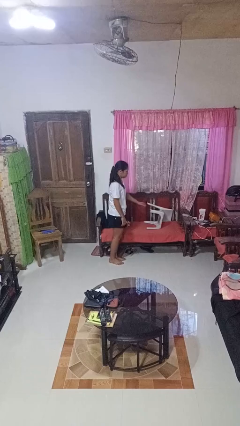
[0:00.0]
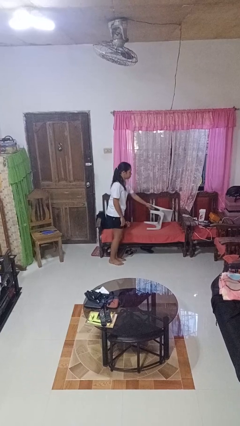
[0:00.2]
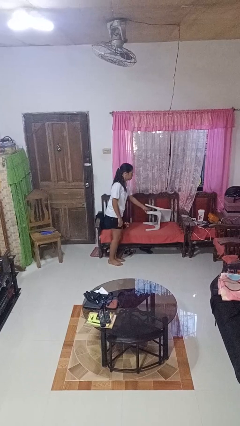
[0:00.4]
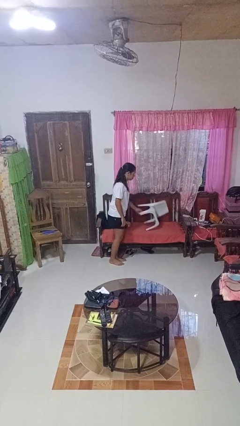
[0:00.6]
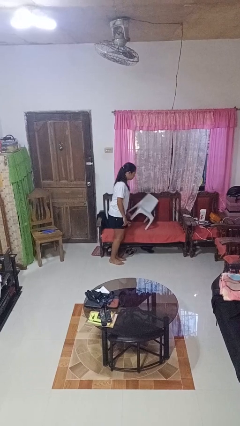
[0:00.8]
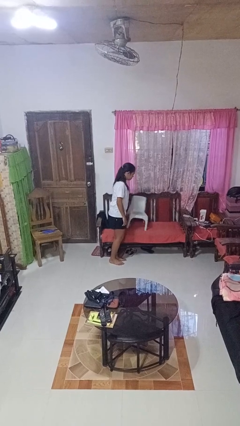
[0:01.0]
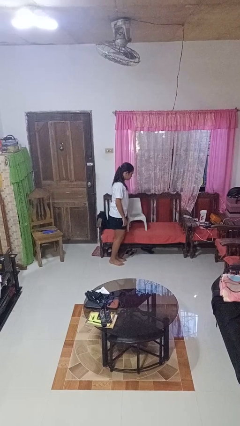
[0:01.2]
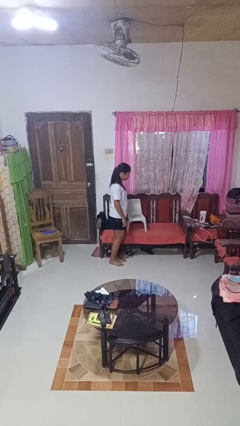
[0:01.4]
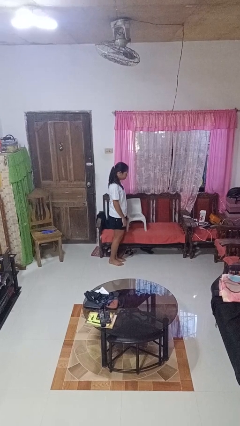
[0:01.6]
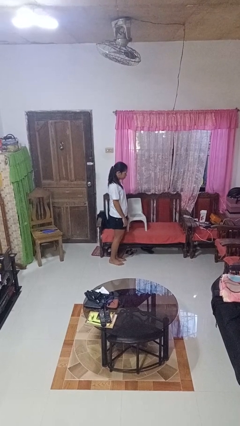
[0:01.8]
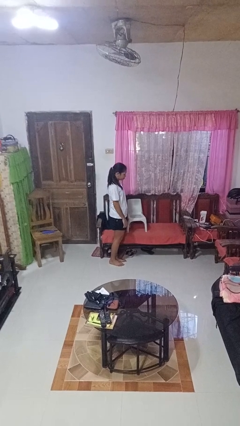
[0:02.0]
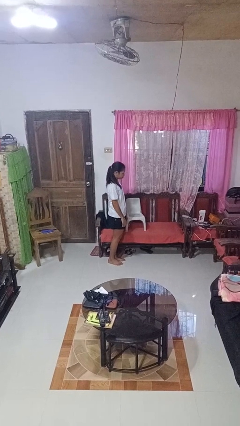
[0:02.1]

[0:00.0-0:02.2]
person sets upright furniture

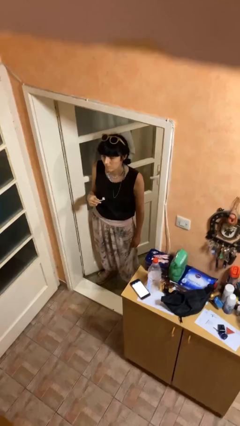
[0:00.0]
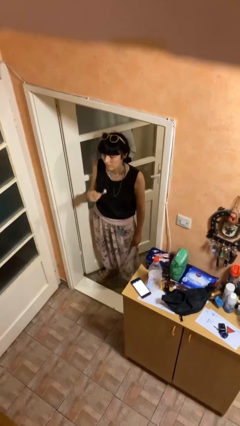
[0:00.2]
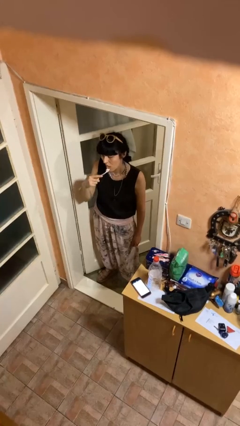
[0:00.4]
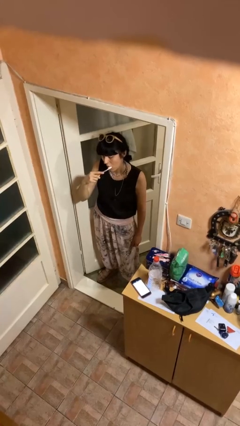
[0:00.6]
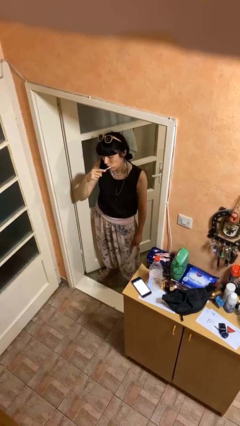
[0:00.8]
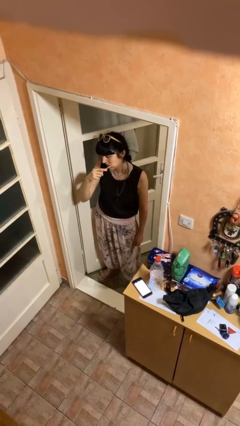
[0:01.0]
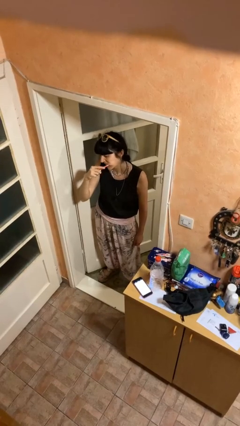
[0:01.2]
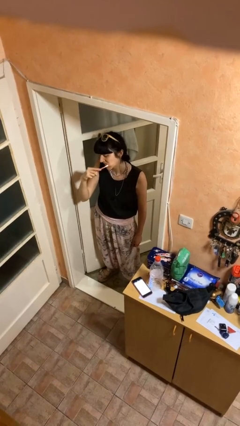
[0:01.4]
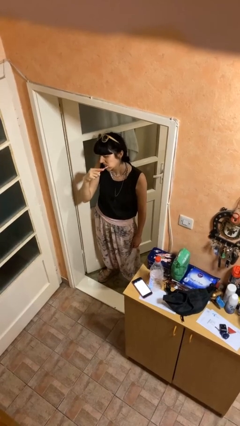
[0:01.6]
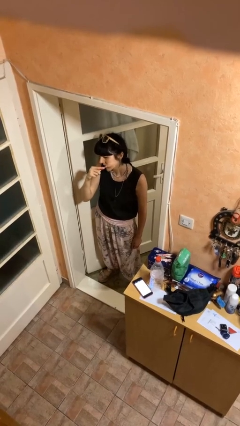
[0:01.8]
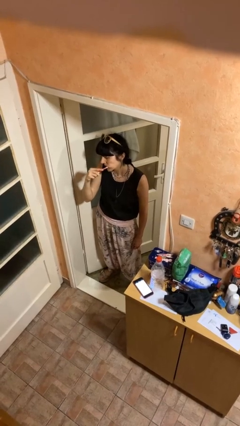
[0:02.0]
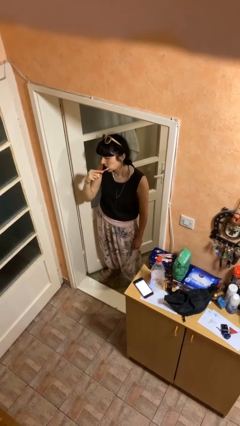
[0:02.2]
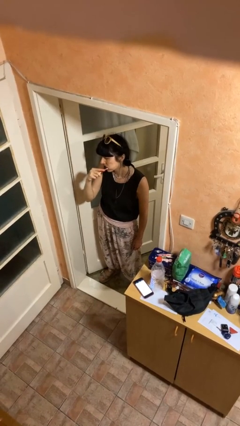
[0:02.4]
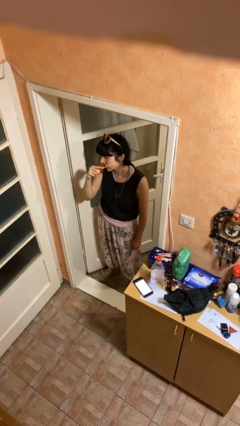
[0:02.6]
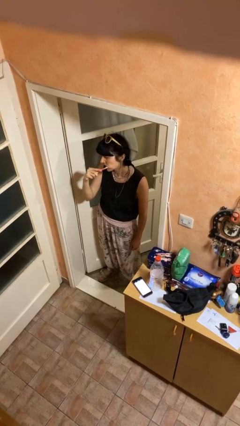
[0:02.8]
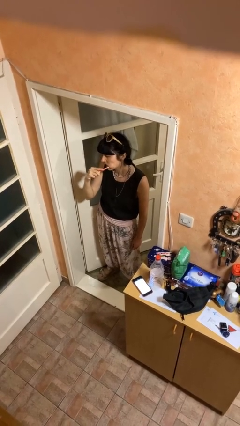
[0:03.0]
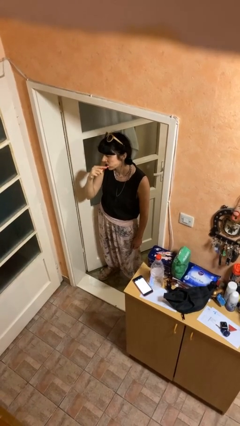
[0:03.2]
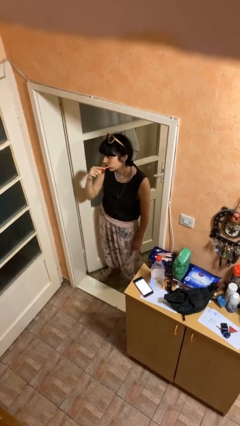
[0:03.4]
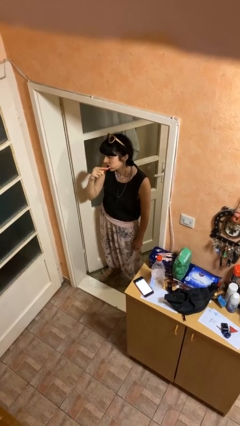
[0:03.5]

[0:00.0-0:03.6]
person brushes teeth

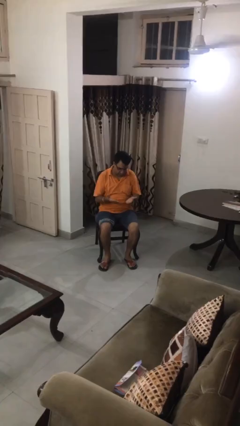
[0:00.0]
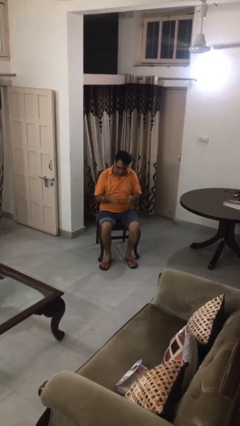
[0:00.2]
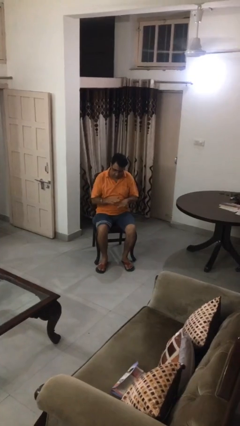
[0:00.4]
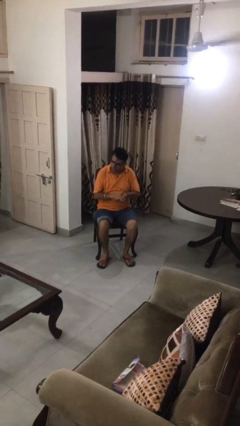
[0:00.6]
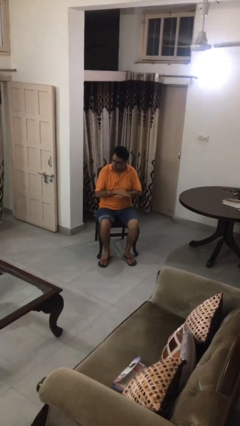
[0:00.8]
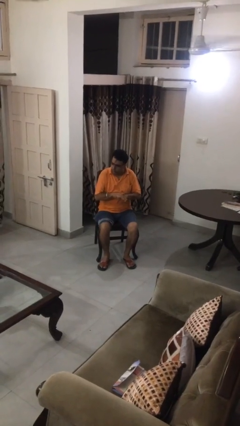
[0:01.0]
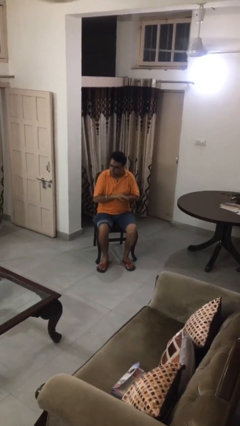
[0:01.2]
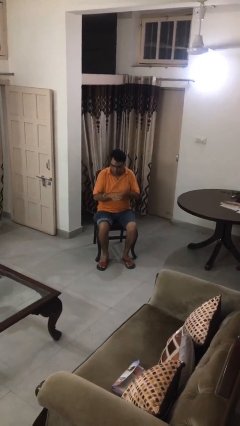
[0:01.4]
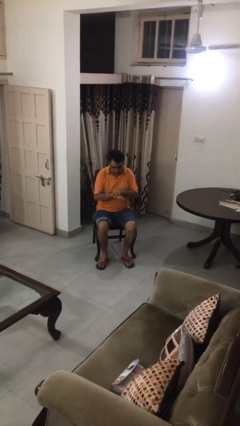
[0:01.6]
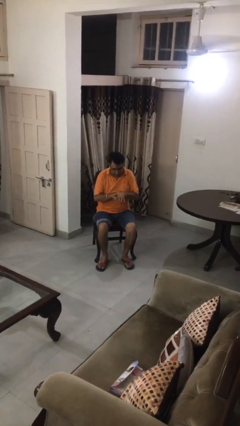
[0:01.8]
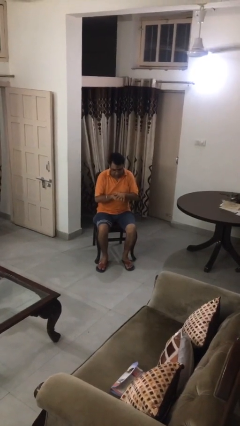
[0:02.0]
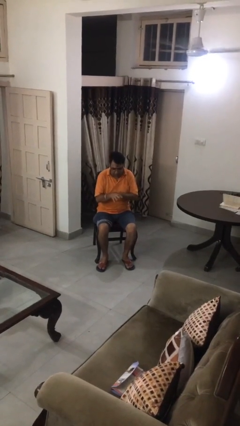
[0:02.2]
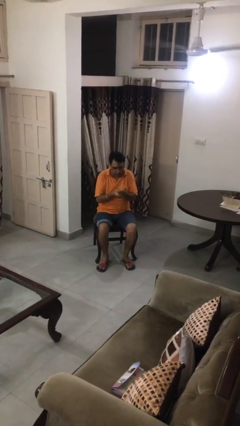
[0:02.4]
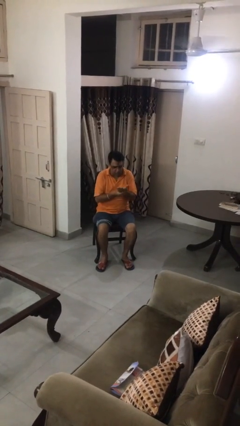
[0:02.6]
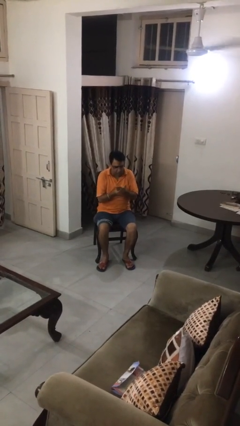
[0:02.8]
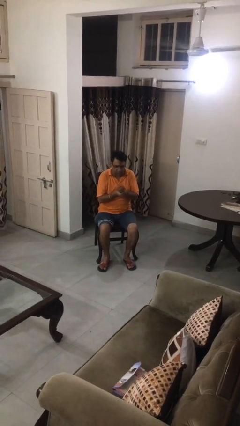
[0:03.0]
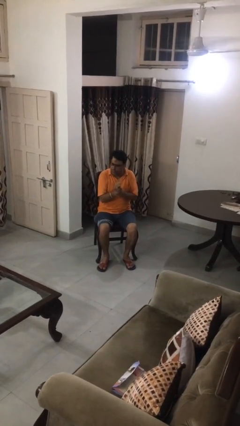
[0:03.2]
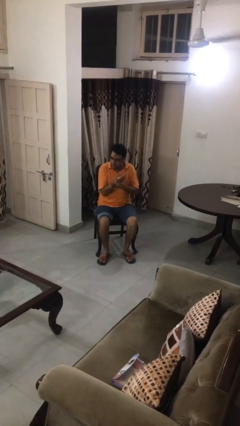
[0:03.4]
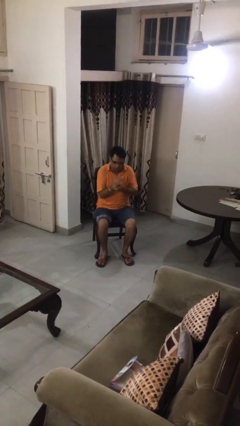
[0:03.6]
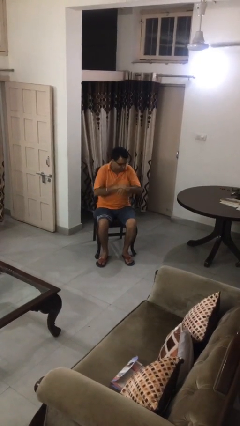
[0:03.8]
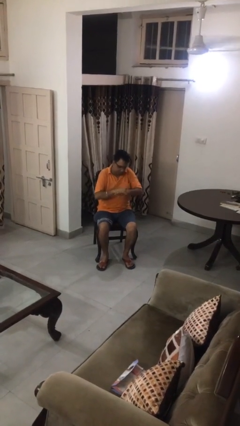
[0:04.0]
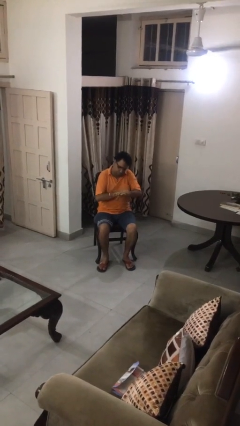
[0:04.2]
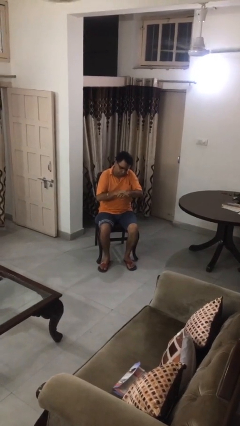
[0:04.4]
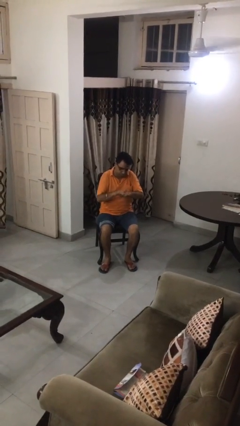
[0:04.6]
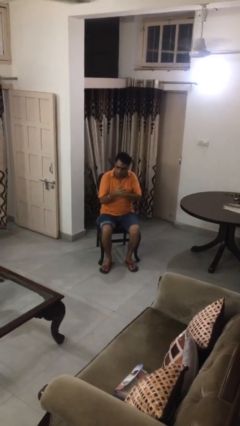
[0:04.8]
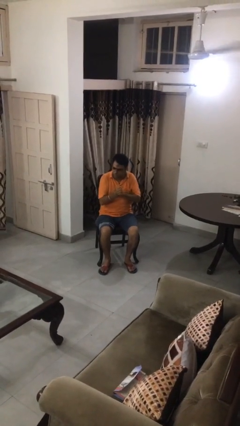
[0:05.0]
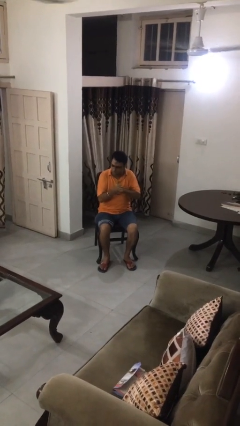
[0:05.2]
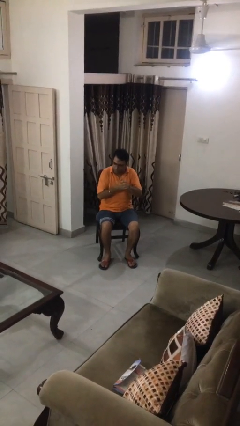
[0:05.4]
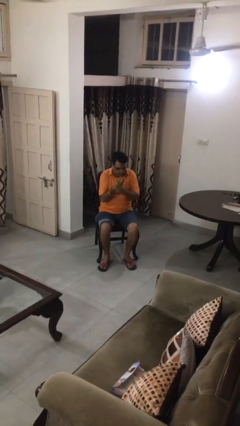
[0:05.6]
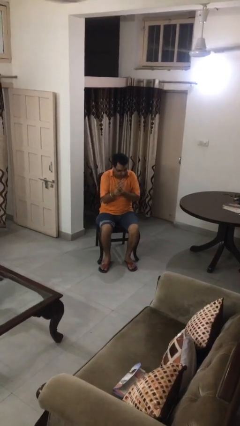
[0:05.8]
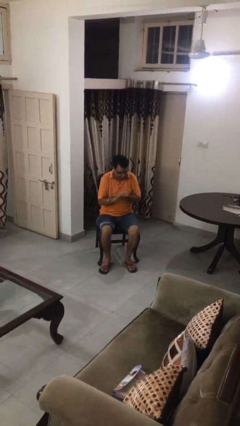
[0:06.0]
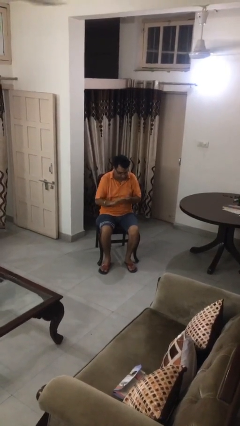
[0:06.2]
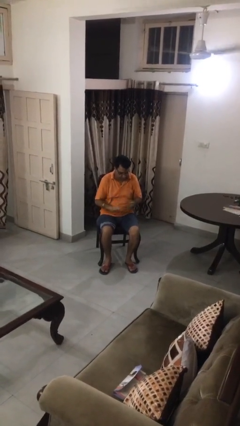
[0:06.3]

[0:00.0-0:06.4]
person looks at hands in lap

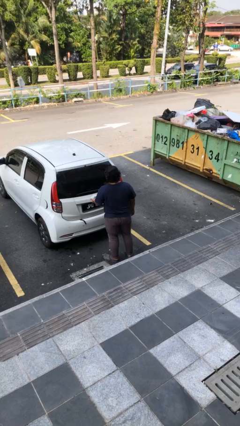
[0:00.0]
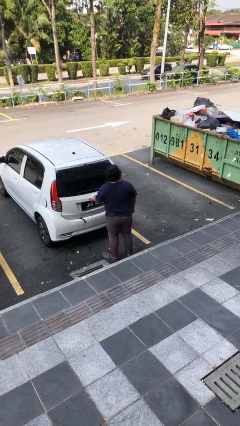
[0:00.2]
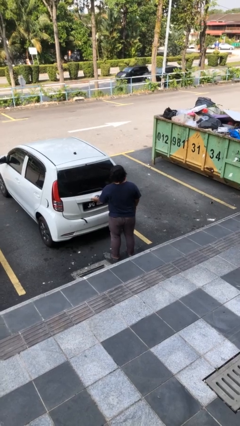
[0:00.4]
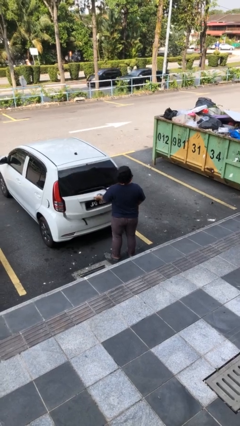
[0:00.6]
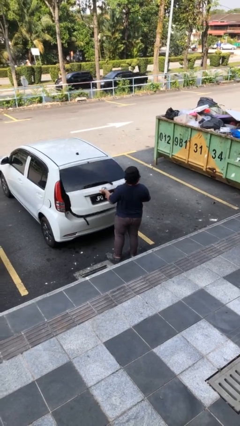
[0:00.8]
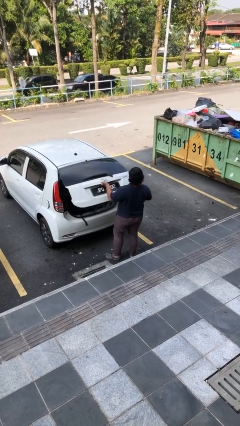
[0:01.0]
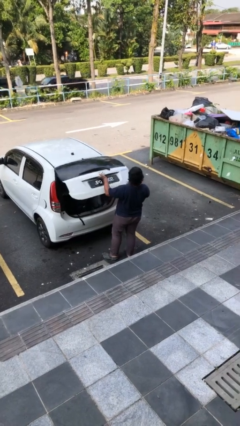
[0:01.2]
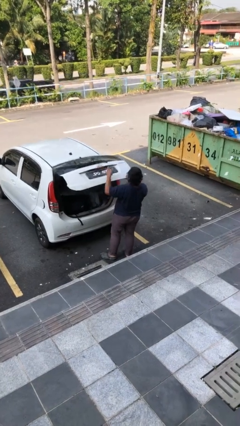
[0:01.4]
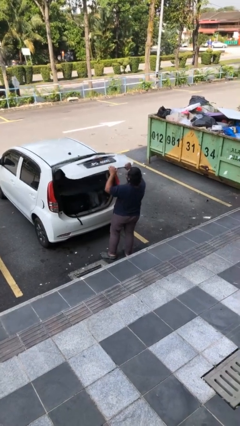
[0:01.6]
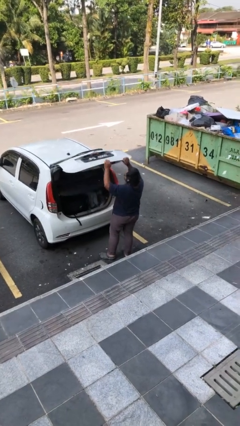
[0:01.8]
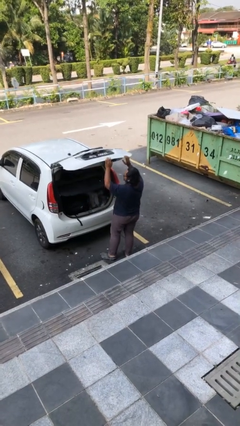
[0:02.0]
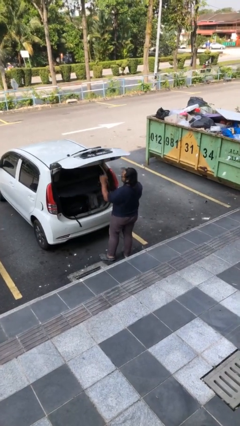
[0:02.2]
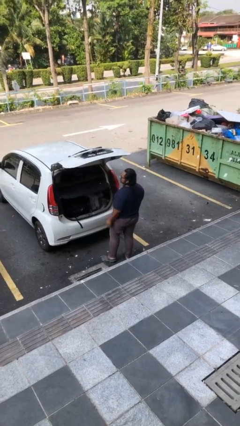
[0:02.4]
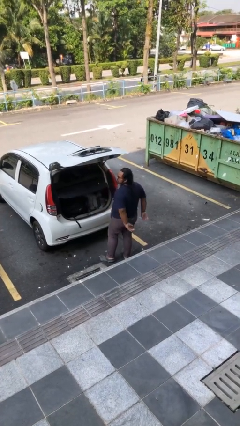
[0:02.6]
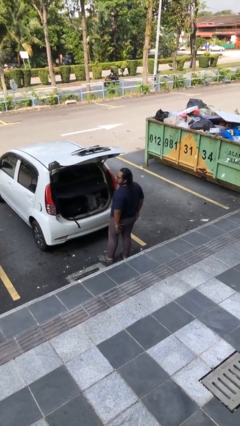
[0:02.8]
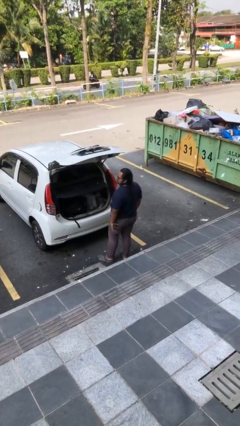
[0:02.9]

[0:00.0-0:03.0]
person opens car trunk

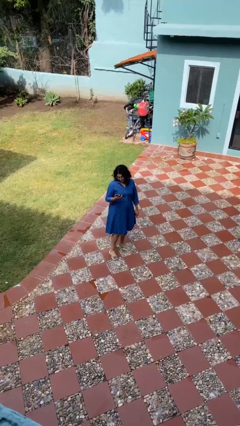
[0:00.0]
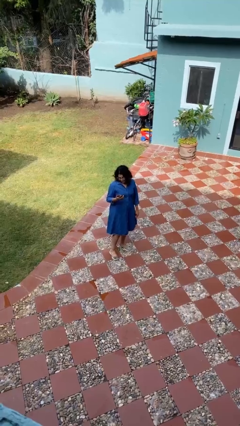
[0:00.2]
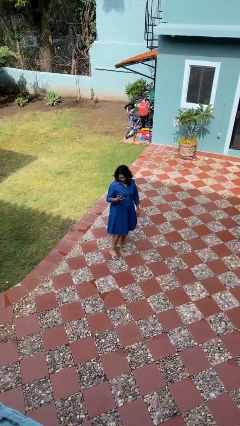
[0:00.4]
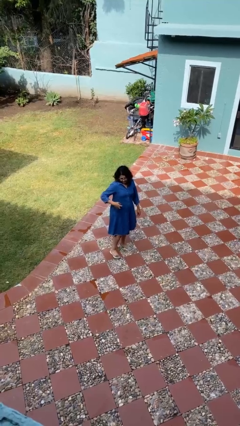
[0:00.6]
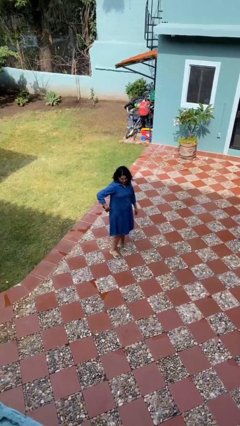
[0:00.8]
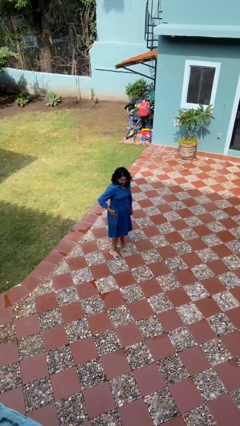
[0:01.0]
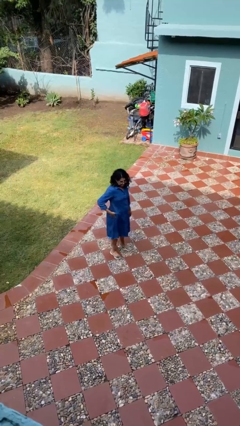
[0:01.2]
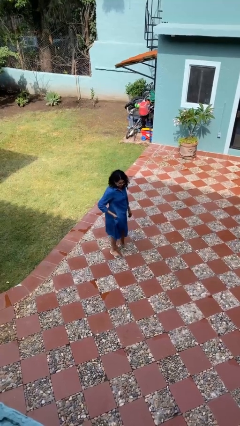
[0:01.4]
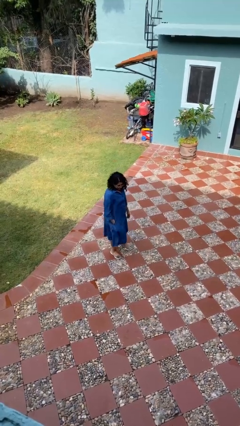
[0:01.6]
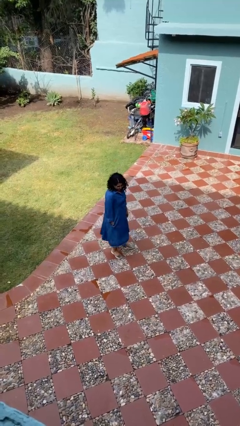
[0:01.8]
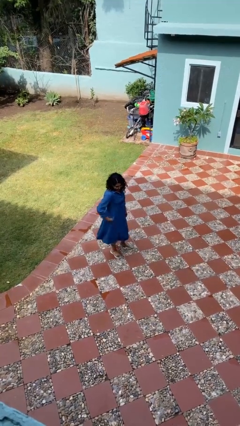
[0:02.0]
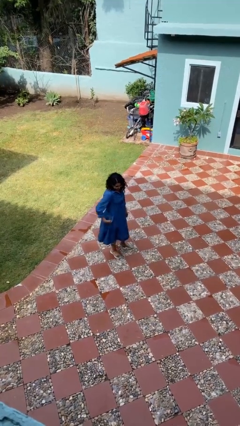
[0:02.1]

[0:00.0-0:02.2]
person puts phone into pocket
